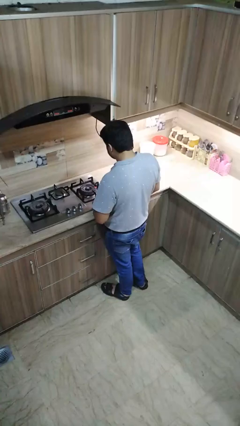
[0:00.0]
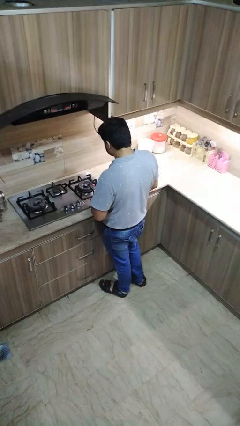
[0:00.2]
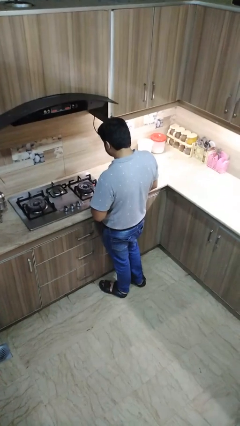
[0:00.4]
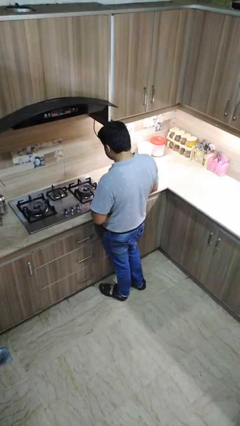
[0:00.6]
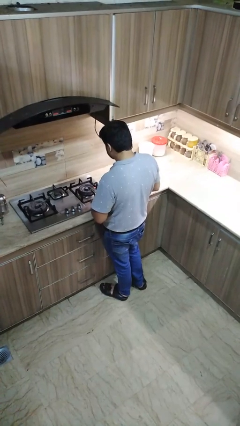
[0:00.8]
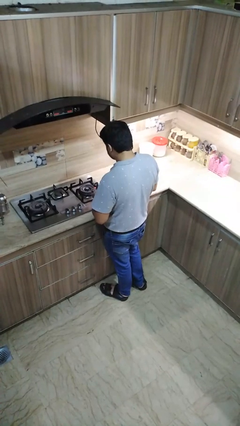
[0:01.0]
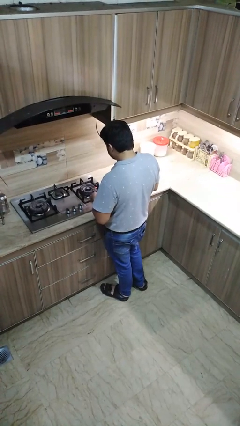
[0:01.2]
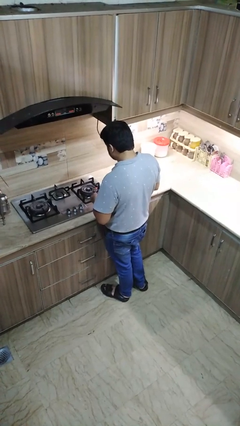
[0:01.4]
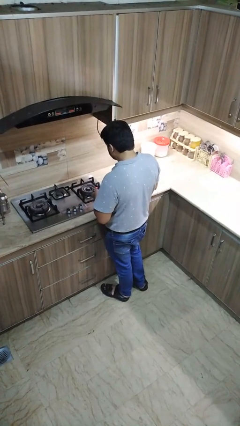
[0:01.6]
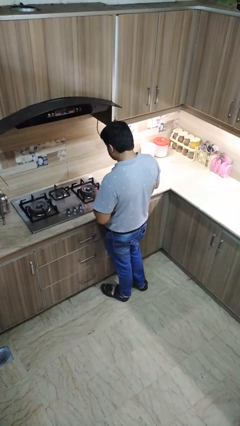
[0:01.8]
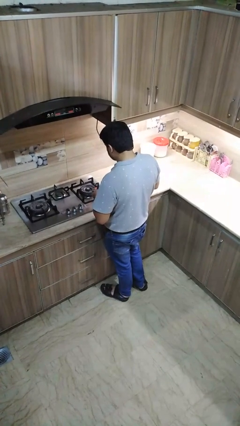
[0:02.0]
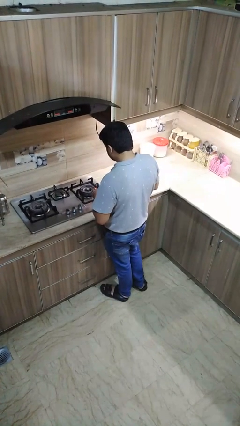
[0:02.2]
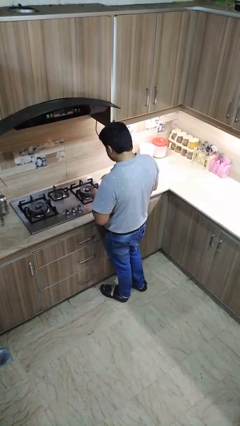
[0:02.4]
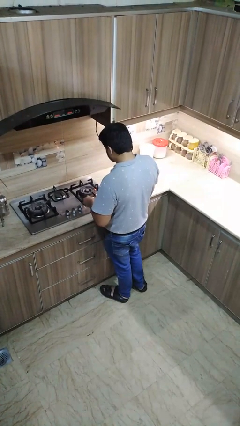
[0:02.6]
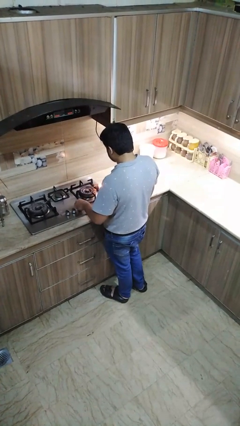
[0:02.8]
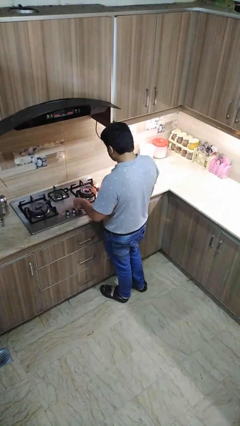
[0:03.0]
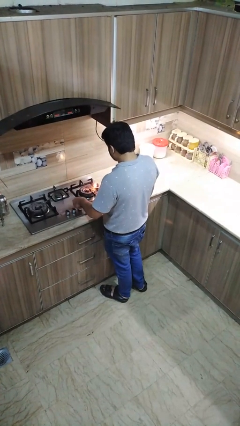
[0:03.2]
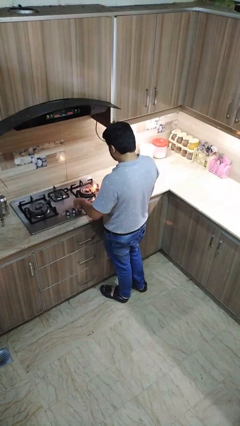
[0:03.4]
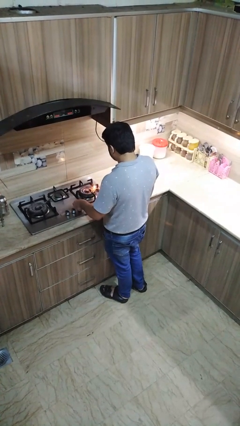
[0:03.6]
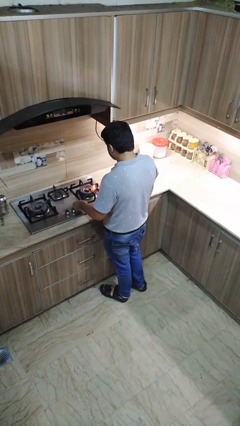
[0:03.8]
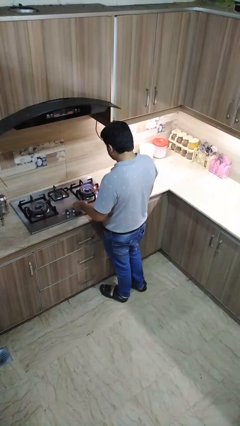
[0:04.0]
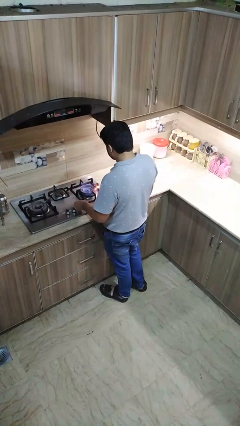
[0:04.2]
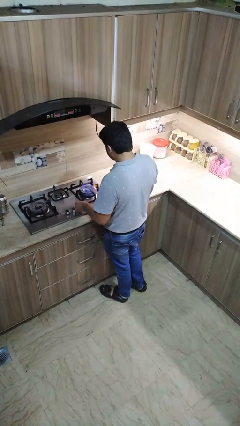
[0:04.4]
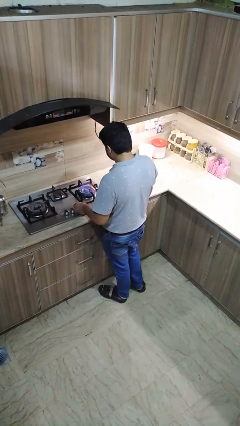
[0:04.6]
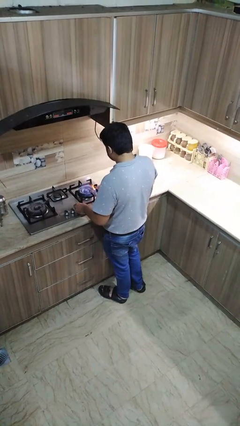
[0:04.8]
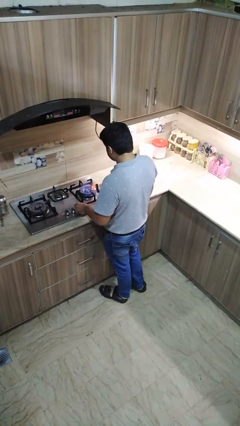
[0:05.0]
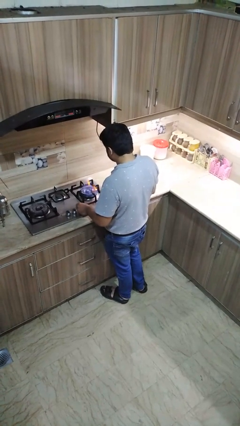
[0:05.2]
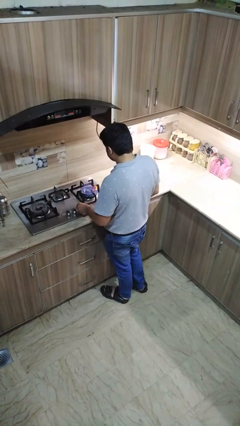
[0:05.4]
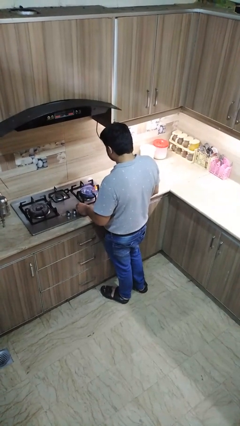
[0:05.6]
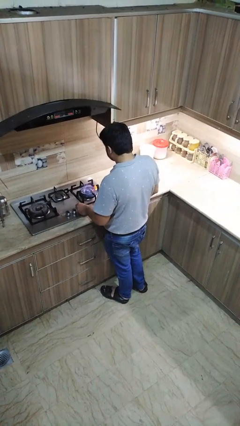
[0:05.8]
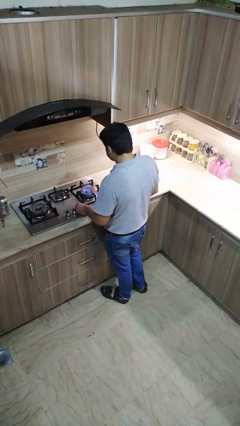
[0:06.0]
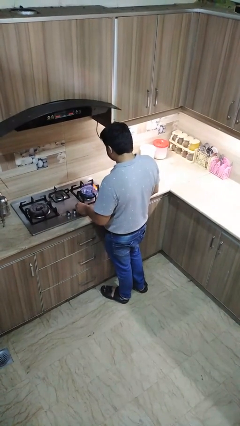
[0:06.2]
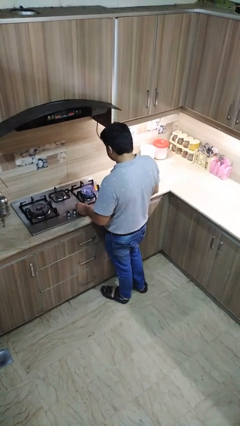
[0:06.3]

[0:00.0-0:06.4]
person turns on stovetop

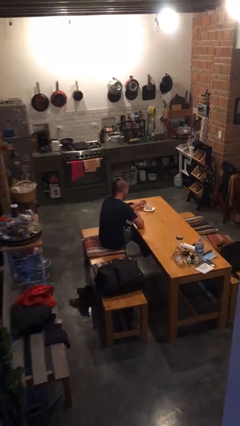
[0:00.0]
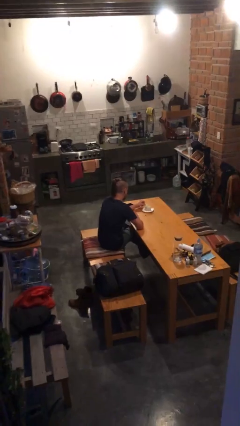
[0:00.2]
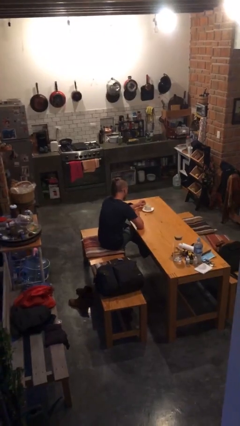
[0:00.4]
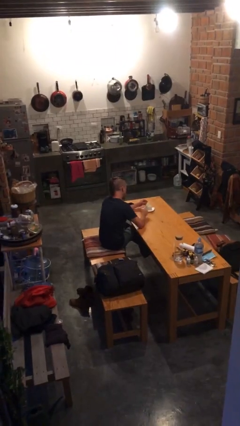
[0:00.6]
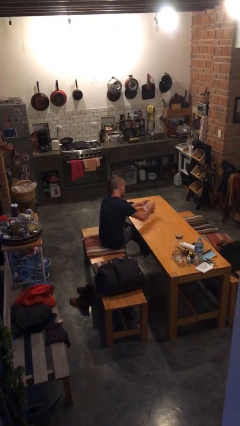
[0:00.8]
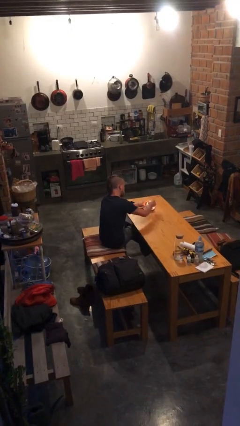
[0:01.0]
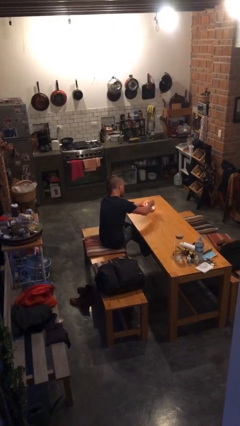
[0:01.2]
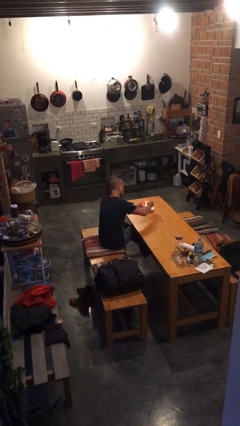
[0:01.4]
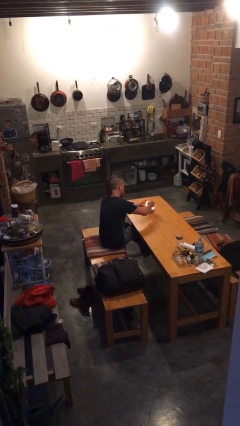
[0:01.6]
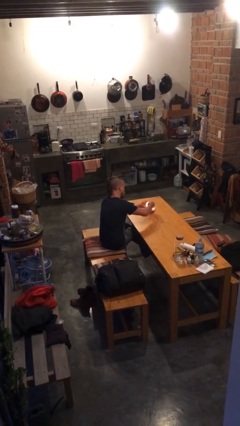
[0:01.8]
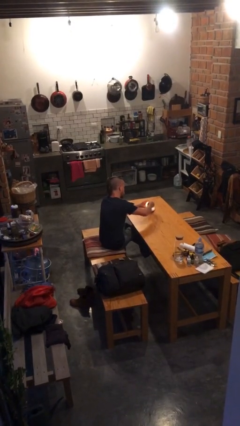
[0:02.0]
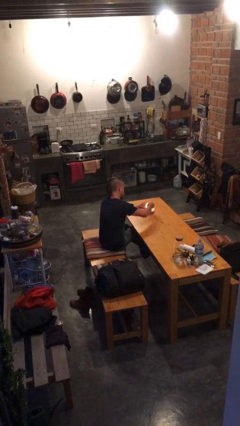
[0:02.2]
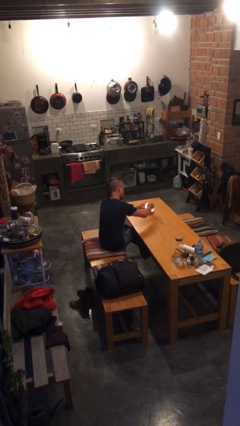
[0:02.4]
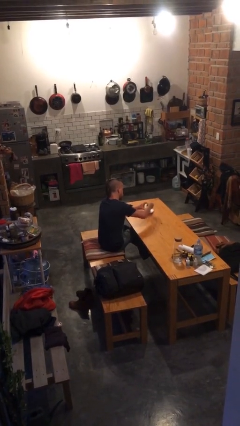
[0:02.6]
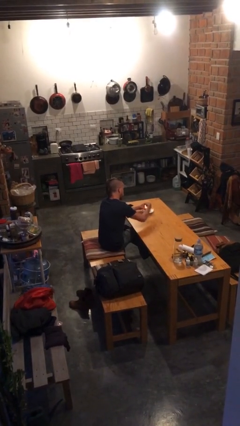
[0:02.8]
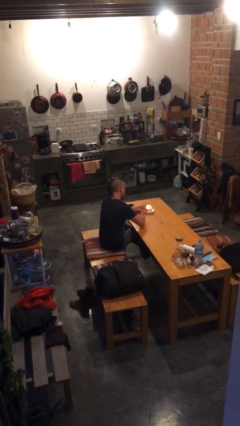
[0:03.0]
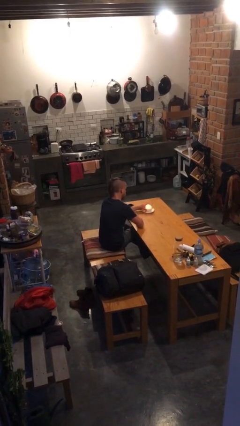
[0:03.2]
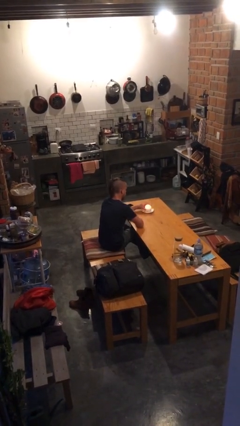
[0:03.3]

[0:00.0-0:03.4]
person lights candle

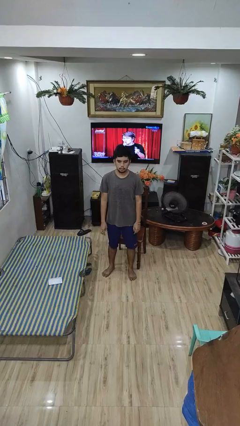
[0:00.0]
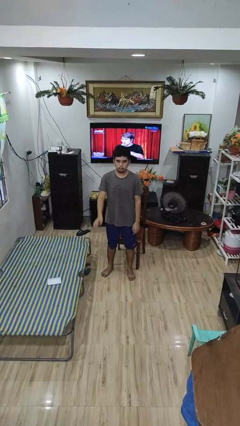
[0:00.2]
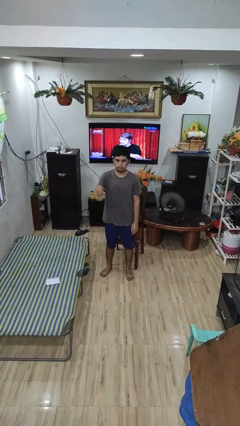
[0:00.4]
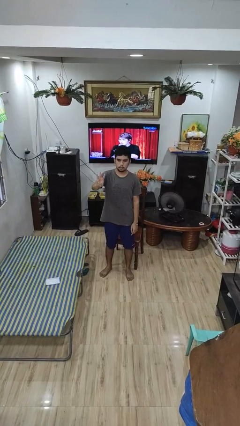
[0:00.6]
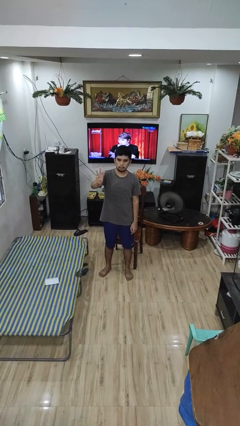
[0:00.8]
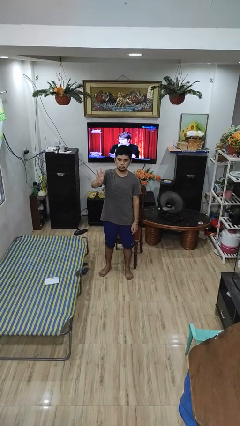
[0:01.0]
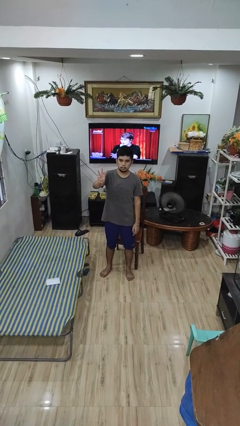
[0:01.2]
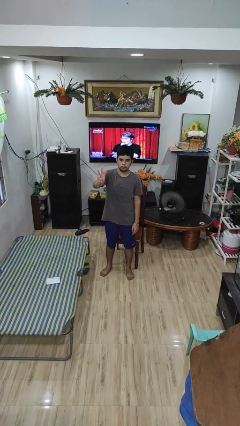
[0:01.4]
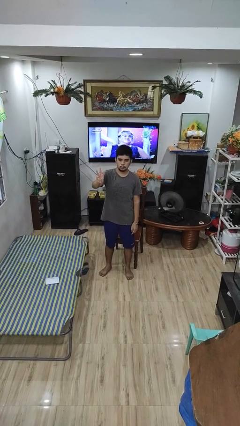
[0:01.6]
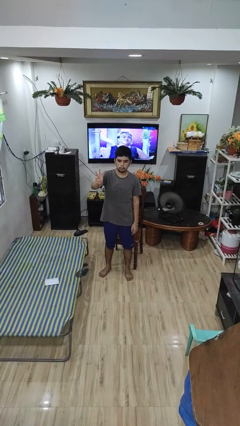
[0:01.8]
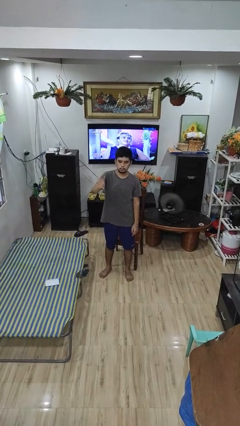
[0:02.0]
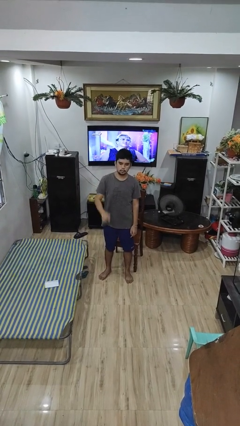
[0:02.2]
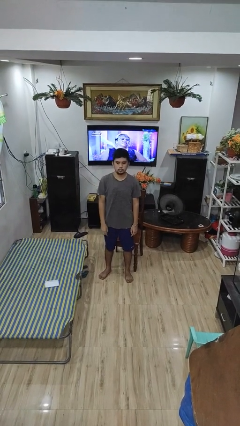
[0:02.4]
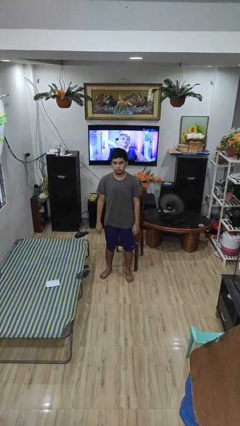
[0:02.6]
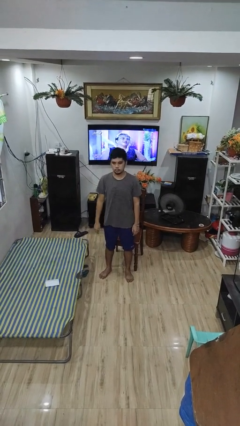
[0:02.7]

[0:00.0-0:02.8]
person gestures number three

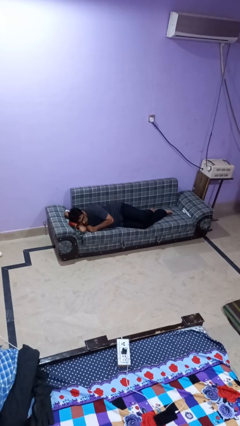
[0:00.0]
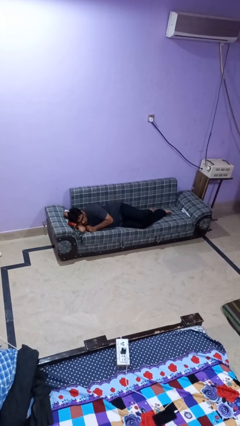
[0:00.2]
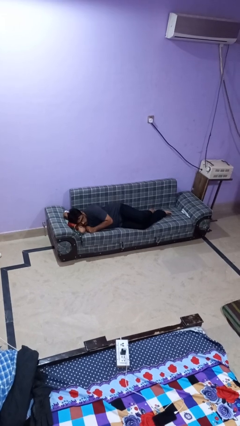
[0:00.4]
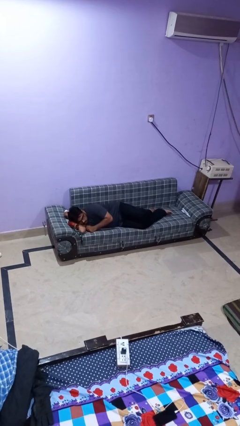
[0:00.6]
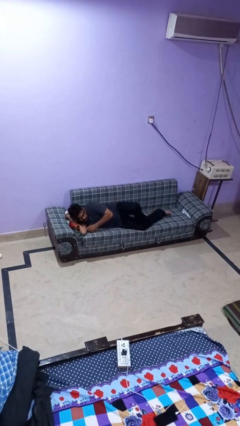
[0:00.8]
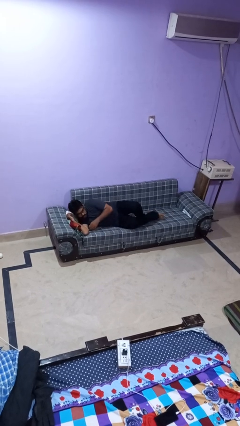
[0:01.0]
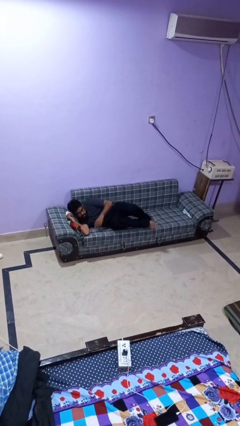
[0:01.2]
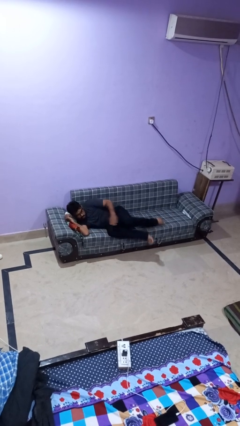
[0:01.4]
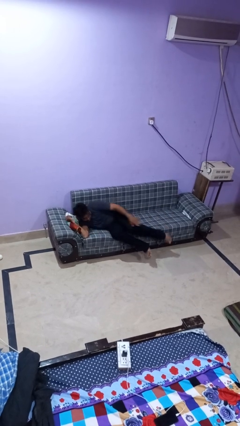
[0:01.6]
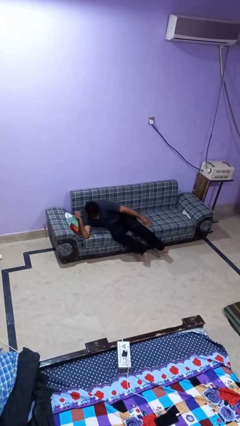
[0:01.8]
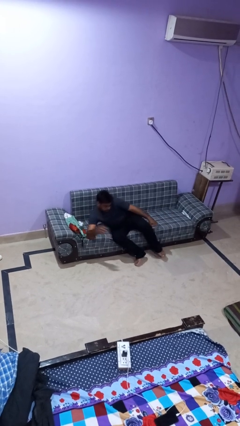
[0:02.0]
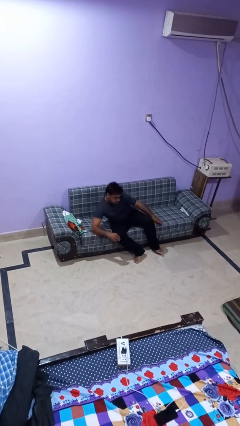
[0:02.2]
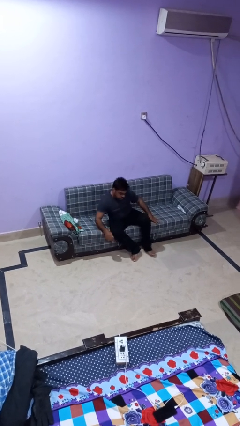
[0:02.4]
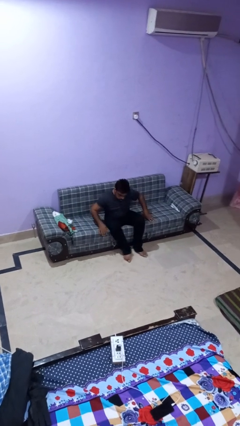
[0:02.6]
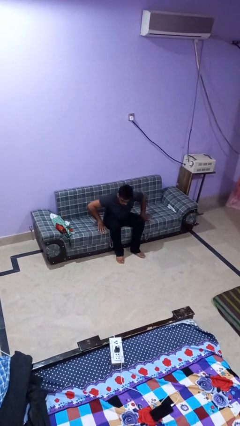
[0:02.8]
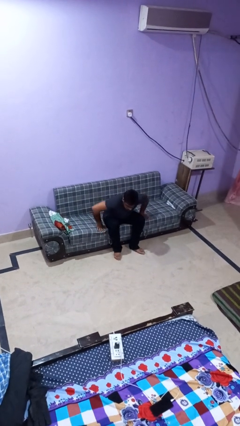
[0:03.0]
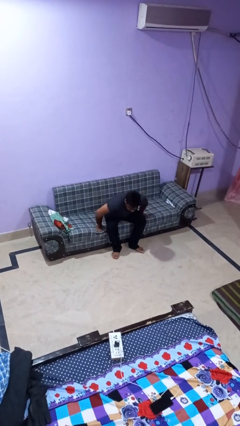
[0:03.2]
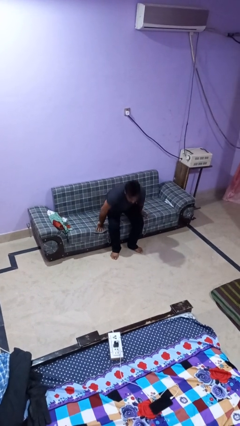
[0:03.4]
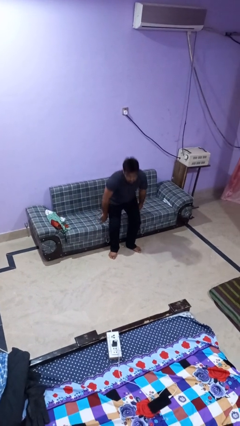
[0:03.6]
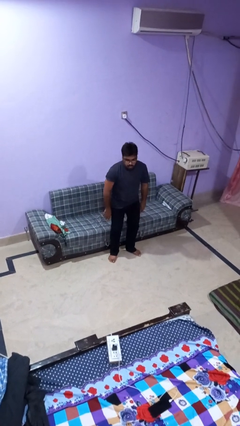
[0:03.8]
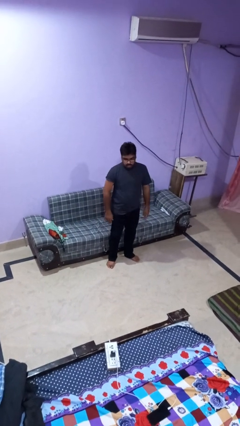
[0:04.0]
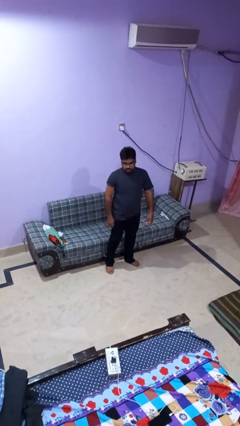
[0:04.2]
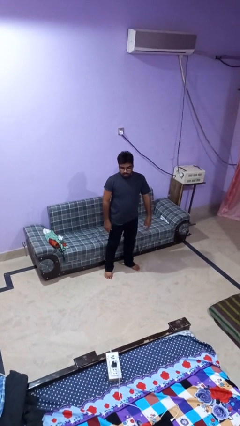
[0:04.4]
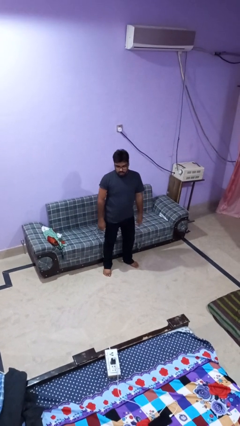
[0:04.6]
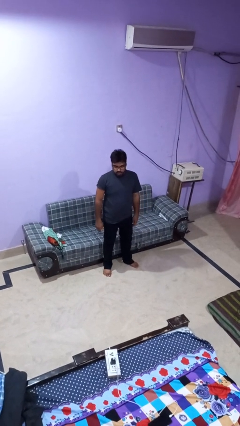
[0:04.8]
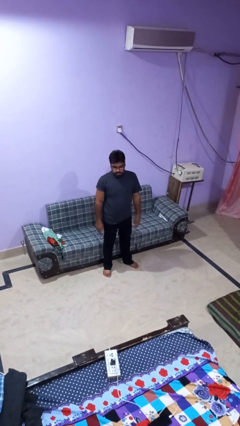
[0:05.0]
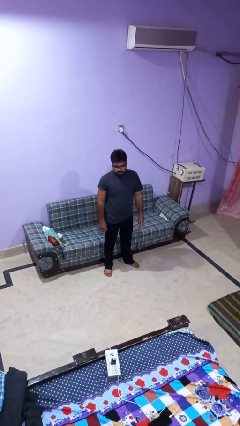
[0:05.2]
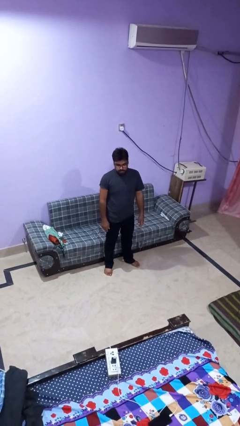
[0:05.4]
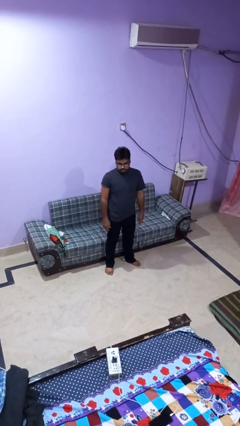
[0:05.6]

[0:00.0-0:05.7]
person stands up
